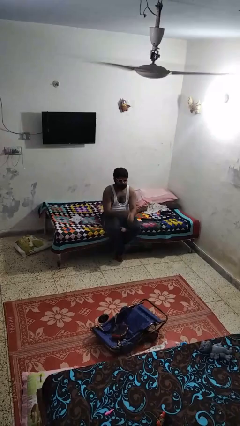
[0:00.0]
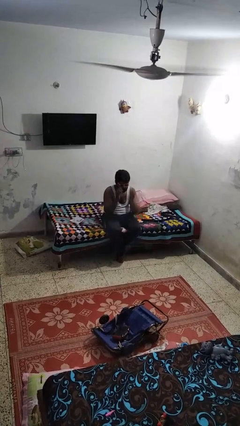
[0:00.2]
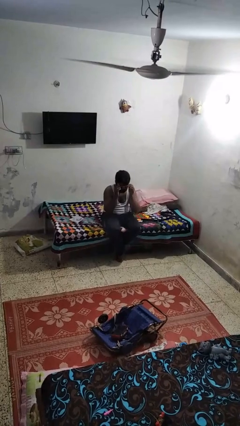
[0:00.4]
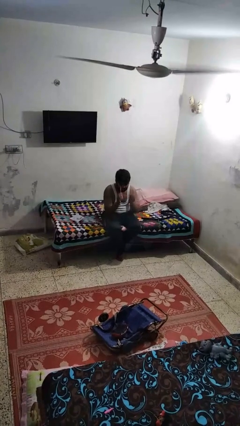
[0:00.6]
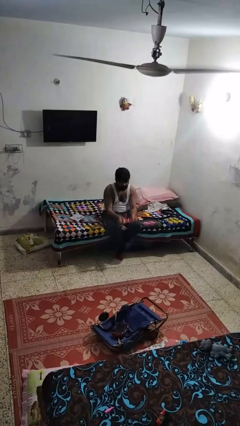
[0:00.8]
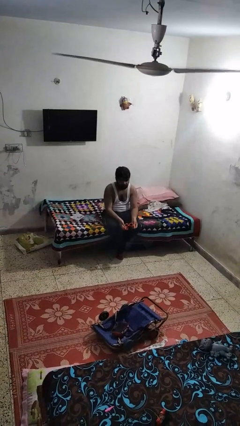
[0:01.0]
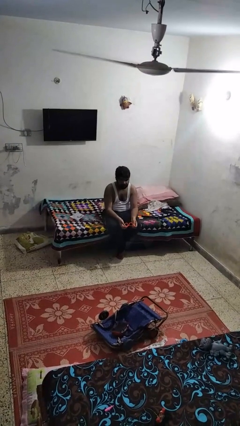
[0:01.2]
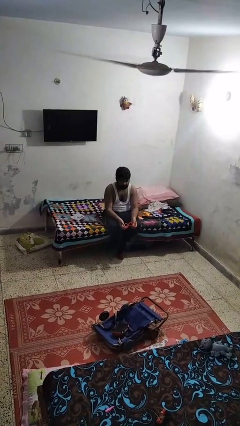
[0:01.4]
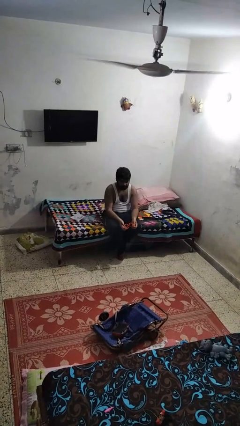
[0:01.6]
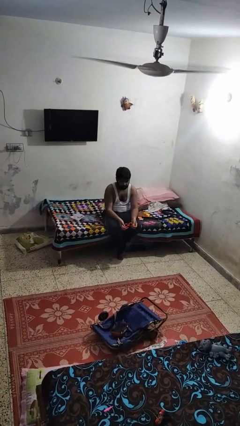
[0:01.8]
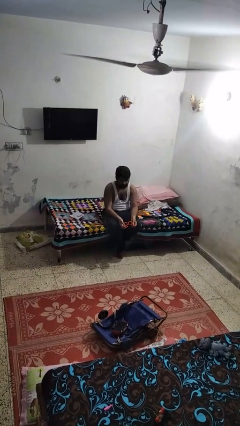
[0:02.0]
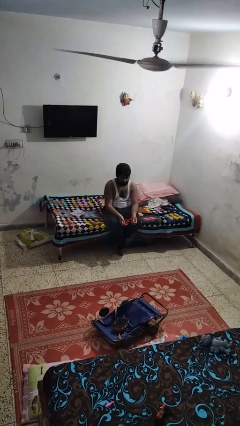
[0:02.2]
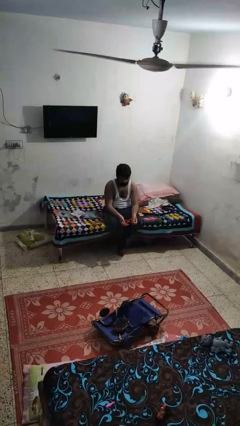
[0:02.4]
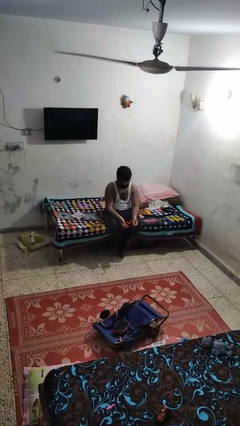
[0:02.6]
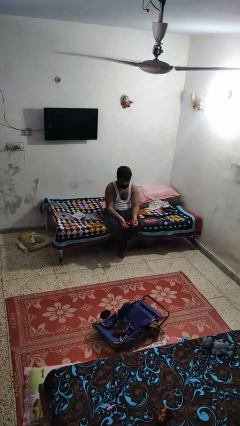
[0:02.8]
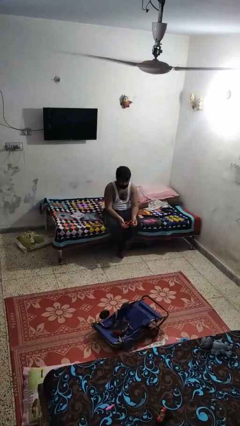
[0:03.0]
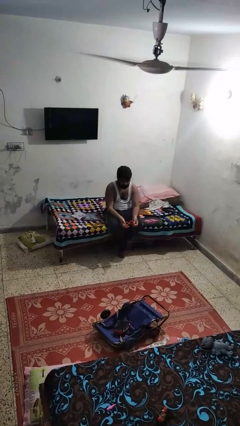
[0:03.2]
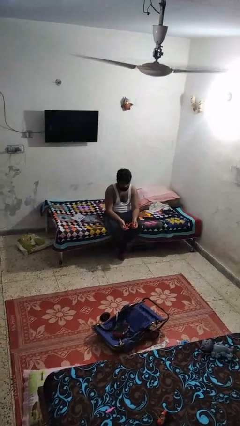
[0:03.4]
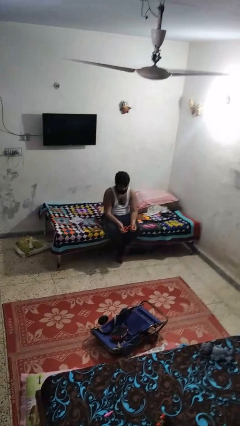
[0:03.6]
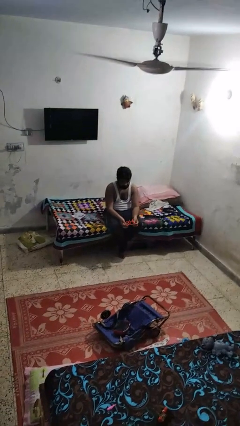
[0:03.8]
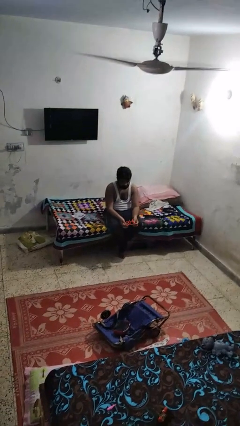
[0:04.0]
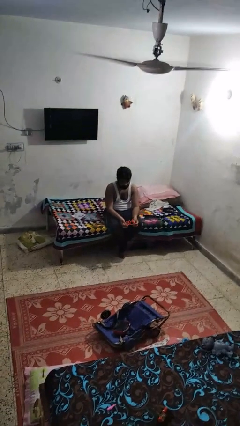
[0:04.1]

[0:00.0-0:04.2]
person takes off sunglasses

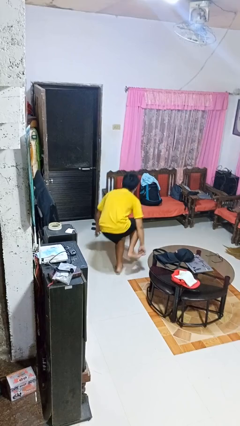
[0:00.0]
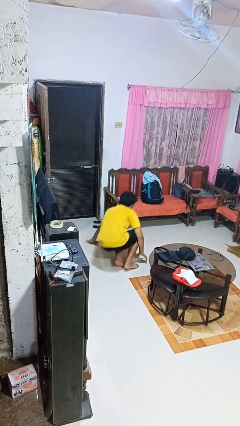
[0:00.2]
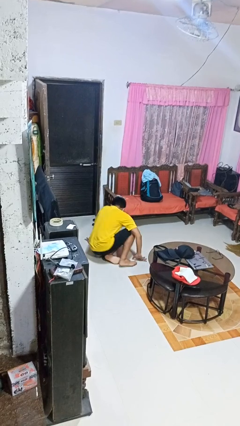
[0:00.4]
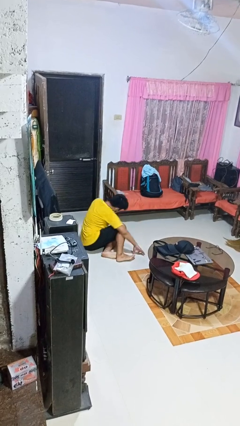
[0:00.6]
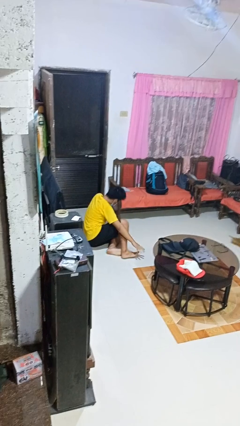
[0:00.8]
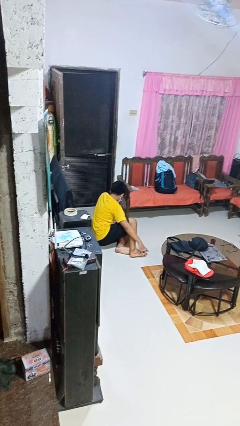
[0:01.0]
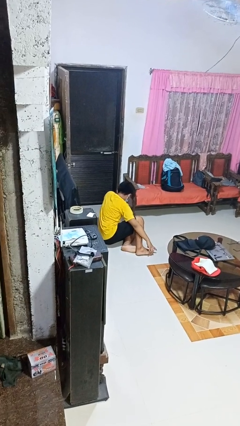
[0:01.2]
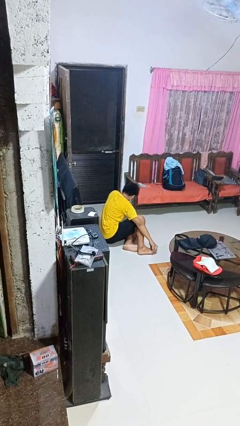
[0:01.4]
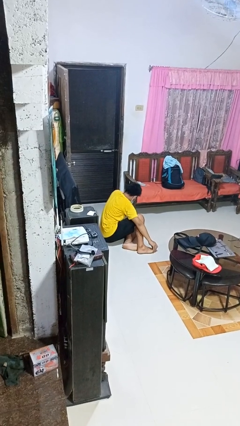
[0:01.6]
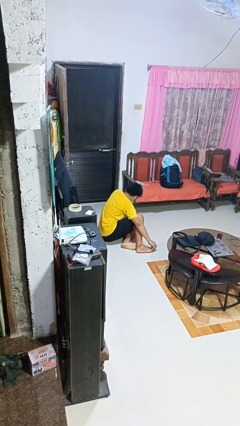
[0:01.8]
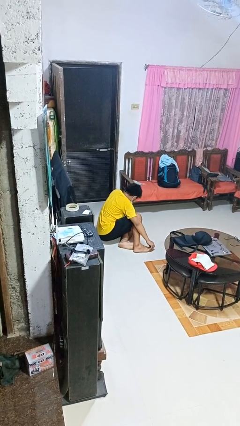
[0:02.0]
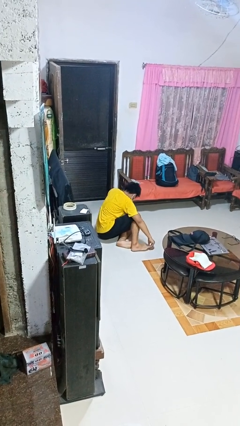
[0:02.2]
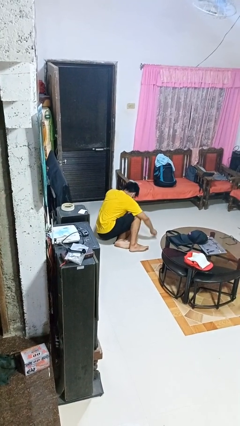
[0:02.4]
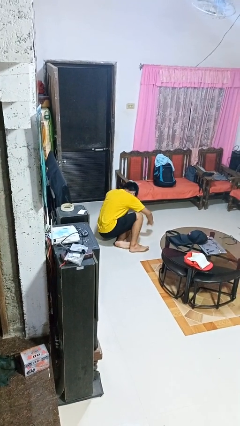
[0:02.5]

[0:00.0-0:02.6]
person lies down on floor

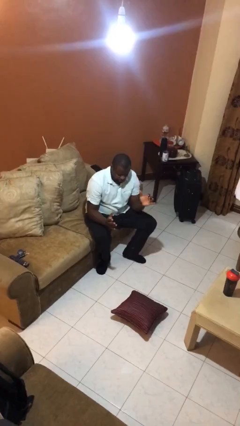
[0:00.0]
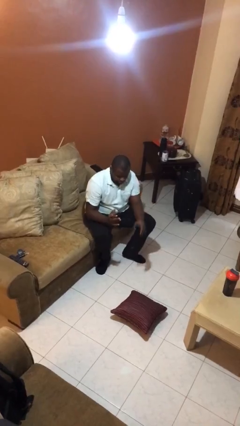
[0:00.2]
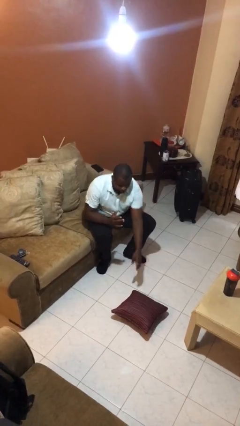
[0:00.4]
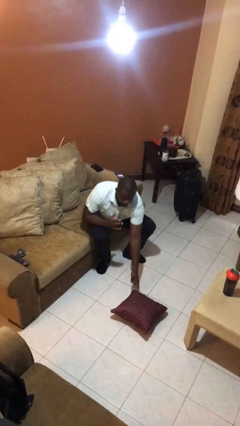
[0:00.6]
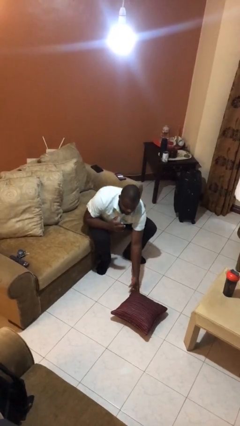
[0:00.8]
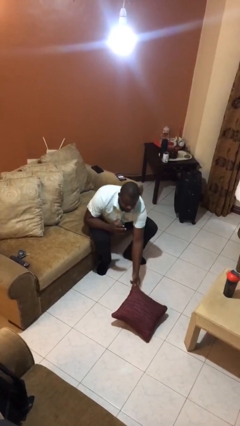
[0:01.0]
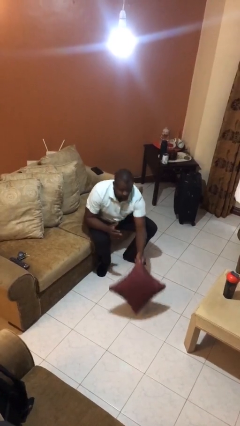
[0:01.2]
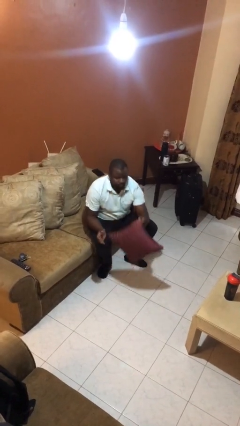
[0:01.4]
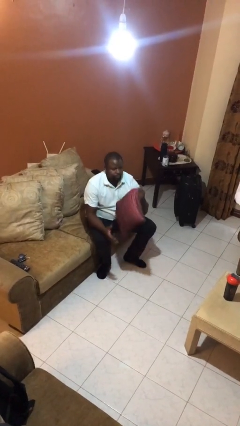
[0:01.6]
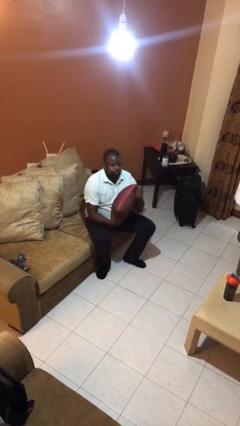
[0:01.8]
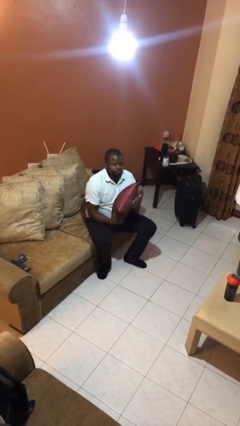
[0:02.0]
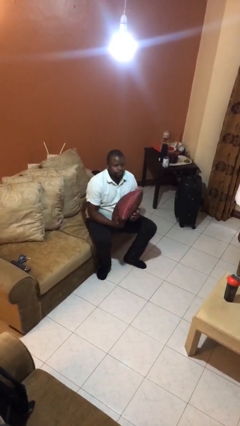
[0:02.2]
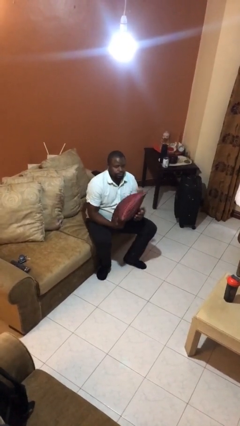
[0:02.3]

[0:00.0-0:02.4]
person picks up object from floor

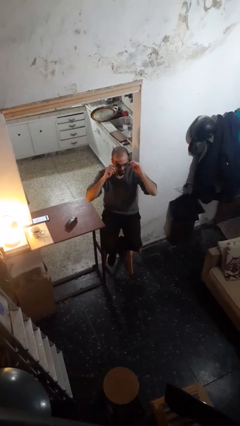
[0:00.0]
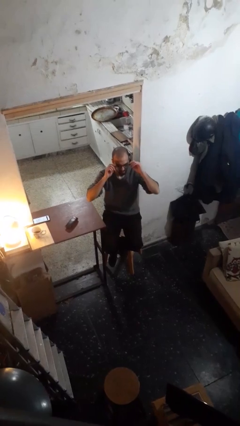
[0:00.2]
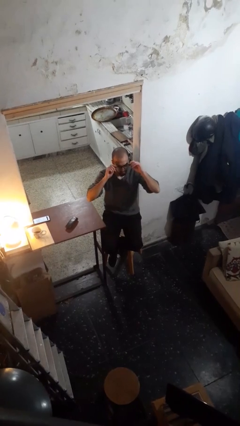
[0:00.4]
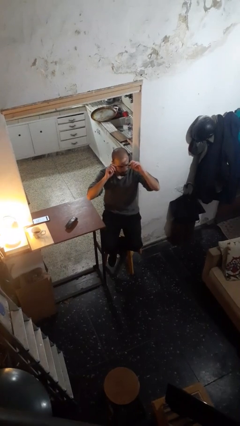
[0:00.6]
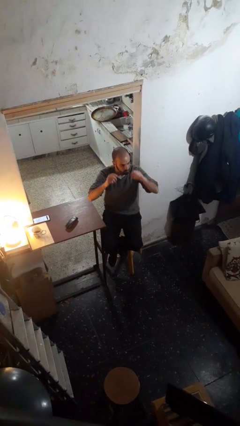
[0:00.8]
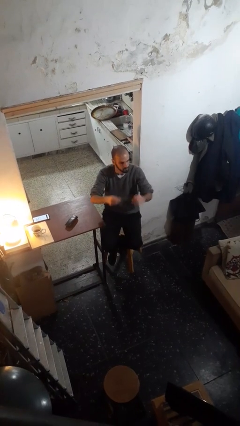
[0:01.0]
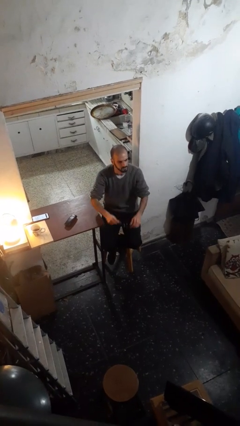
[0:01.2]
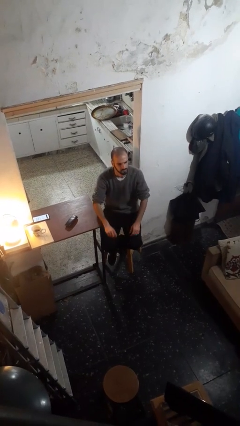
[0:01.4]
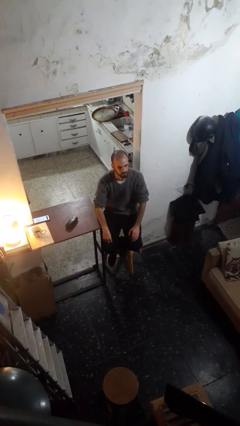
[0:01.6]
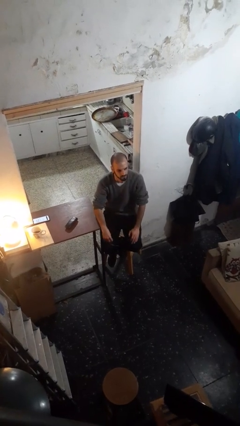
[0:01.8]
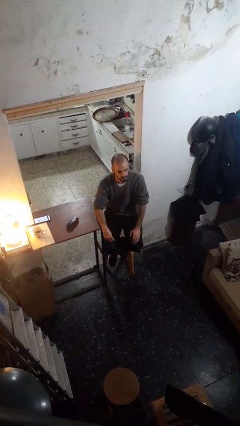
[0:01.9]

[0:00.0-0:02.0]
person takes off glasses

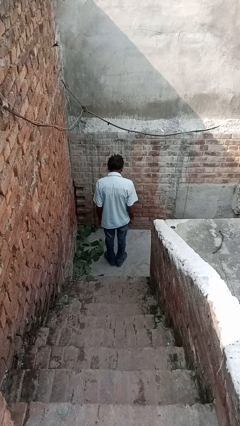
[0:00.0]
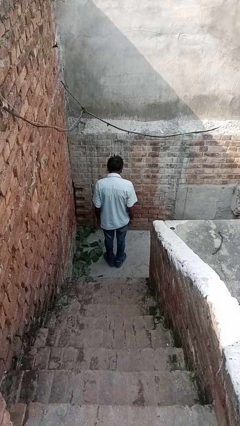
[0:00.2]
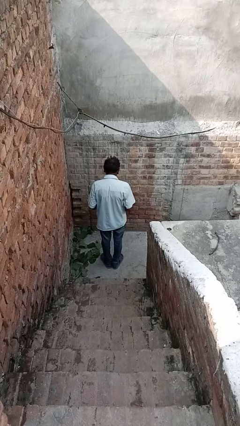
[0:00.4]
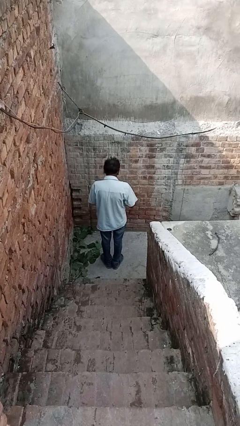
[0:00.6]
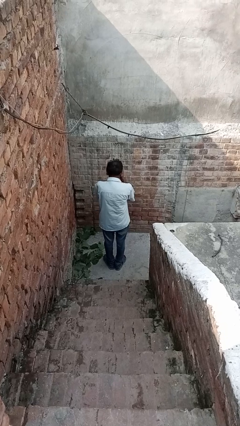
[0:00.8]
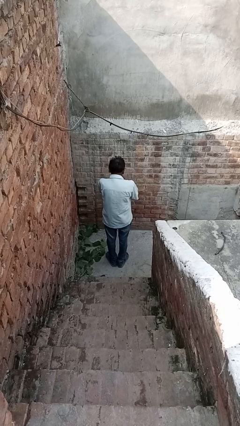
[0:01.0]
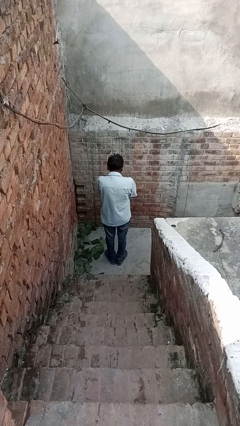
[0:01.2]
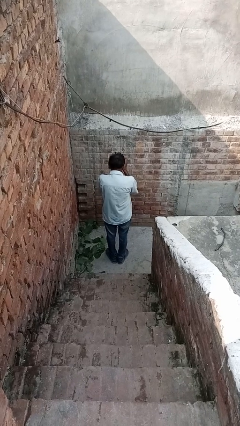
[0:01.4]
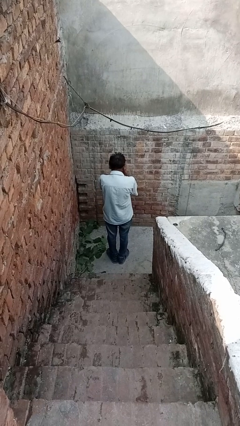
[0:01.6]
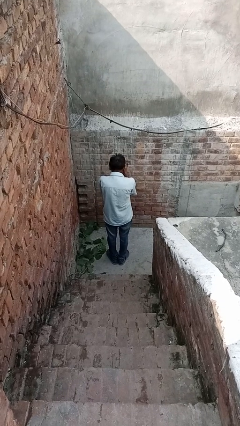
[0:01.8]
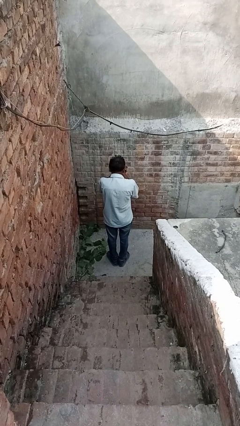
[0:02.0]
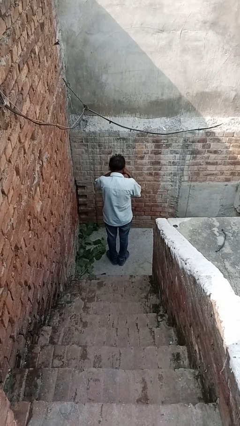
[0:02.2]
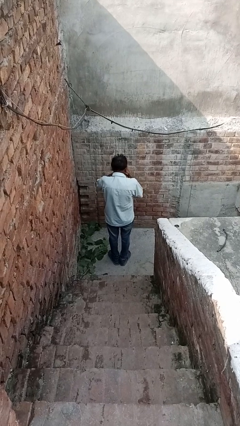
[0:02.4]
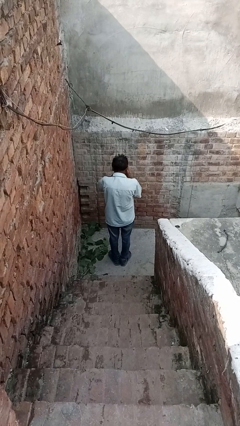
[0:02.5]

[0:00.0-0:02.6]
person blows into hands

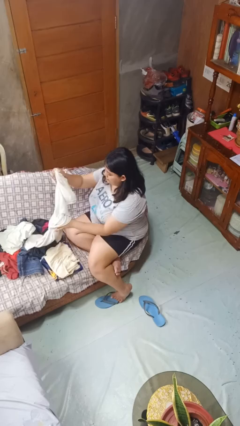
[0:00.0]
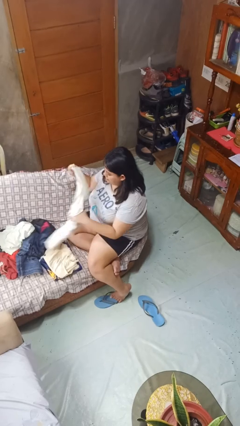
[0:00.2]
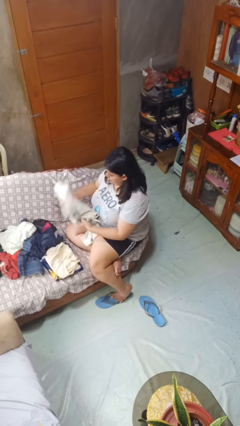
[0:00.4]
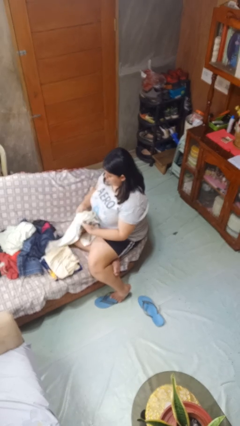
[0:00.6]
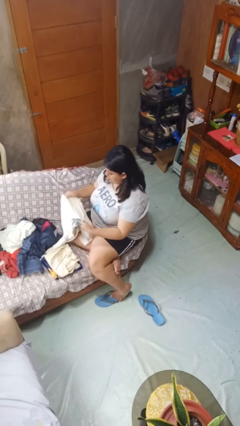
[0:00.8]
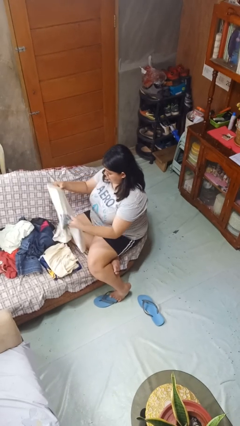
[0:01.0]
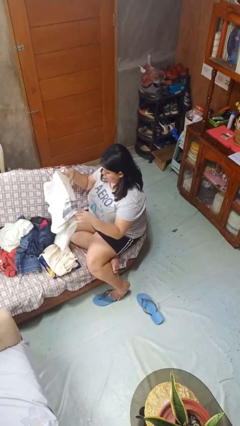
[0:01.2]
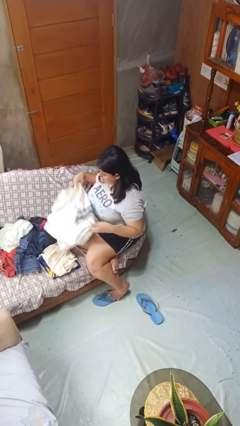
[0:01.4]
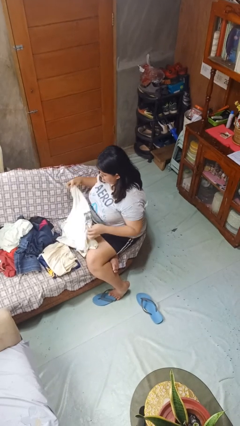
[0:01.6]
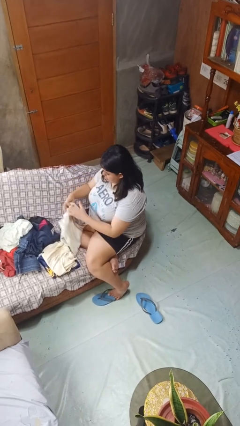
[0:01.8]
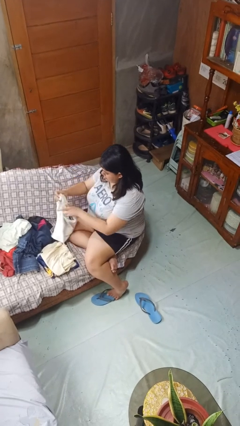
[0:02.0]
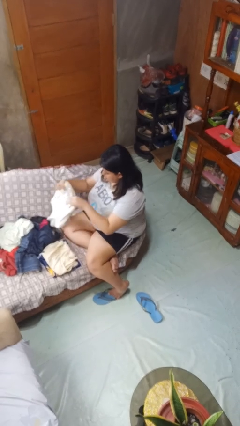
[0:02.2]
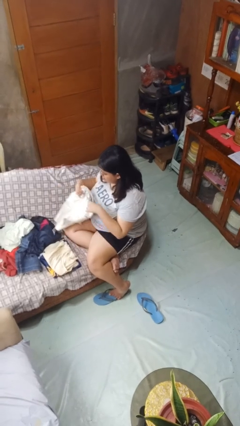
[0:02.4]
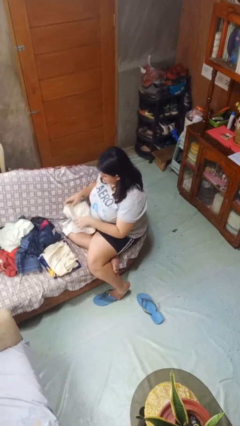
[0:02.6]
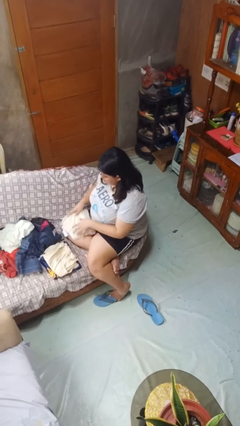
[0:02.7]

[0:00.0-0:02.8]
person folds shirt

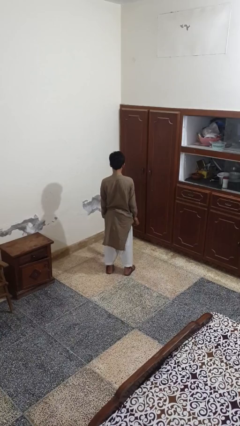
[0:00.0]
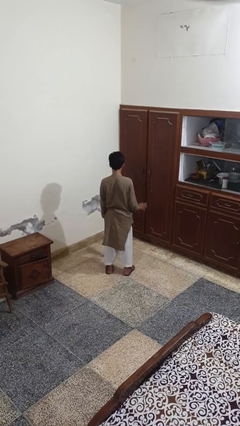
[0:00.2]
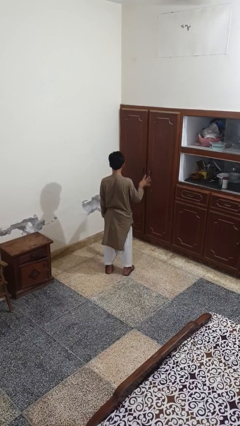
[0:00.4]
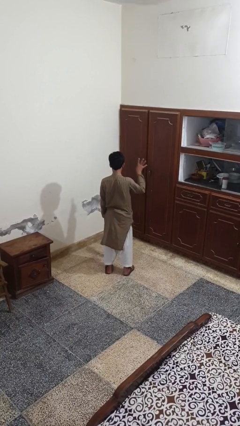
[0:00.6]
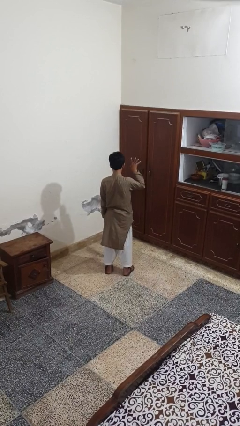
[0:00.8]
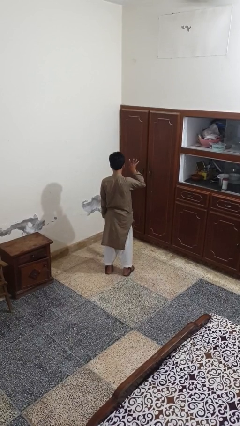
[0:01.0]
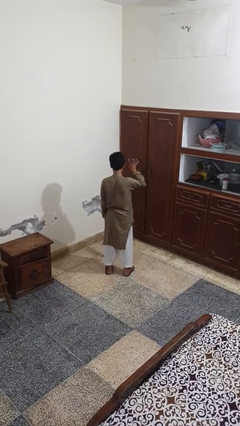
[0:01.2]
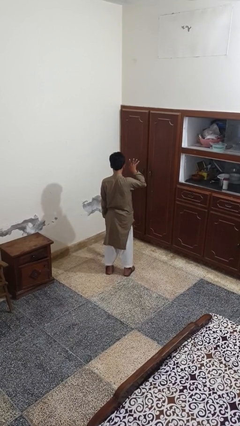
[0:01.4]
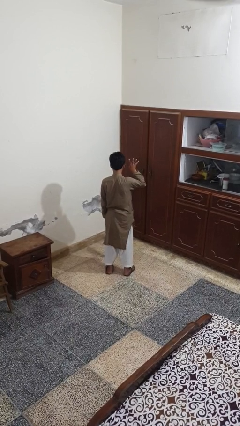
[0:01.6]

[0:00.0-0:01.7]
person gestures number four
